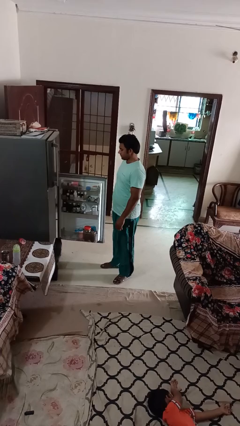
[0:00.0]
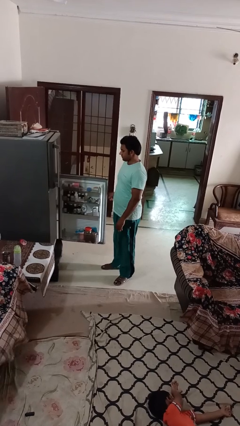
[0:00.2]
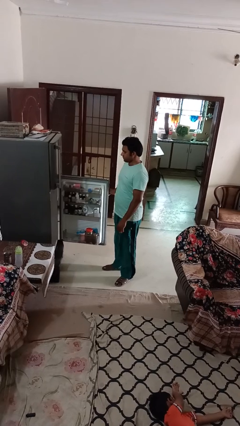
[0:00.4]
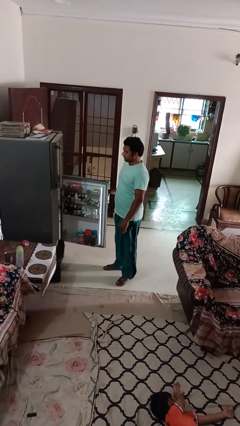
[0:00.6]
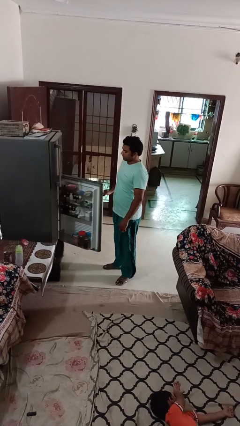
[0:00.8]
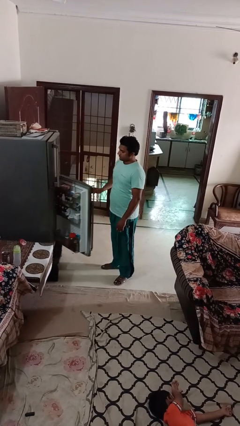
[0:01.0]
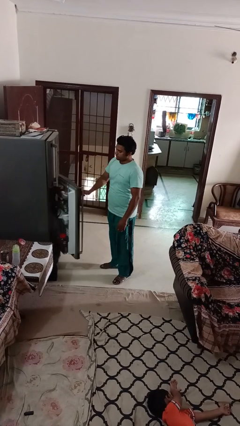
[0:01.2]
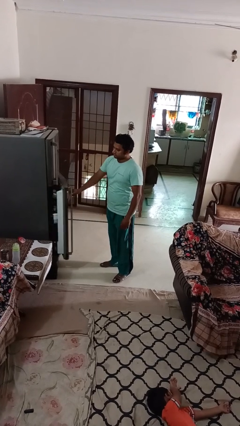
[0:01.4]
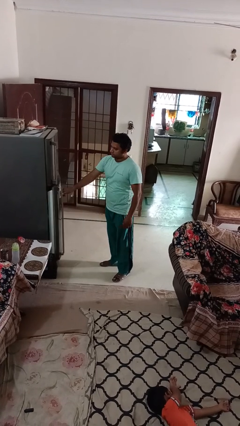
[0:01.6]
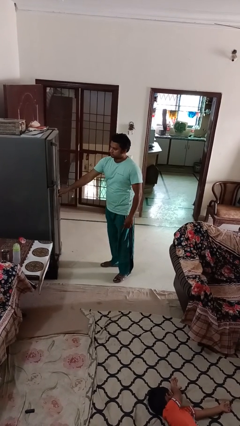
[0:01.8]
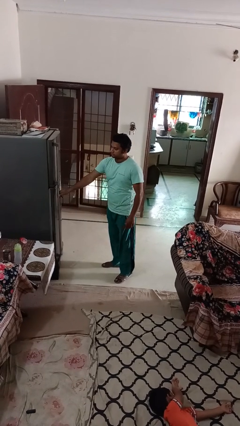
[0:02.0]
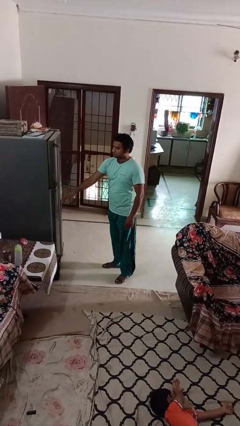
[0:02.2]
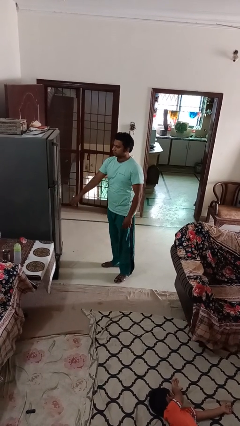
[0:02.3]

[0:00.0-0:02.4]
person closes refrigerator

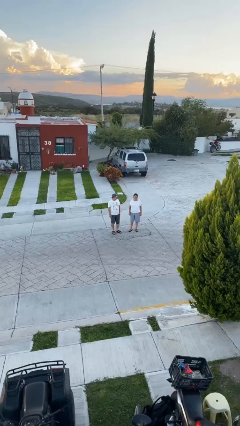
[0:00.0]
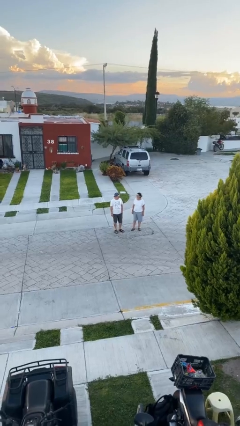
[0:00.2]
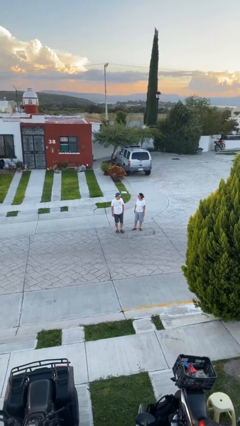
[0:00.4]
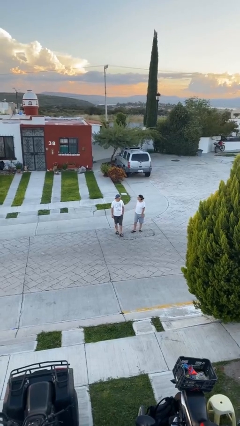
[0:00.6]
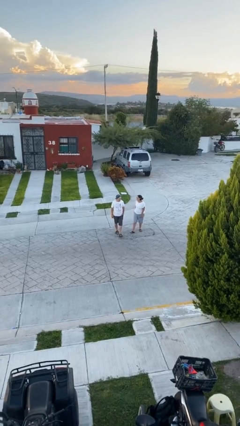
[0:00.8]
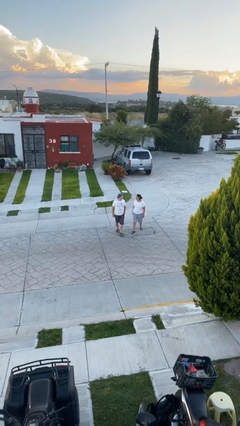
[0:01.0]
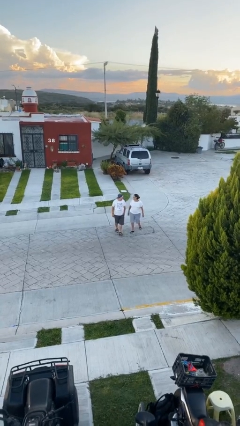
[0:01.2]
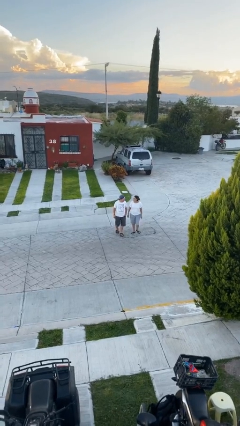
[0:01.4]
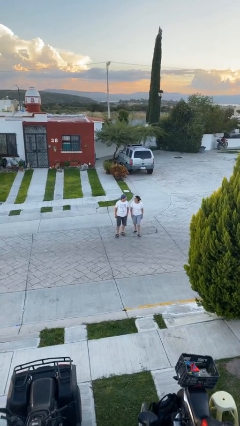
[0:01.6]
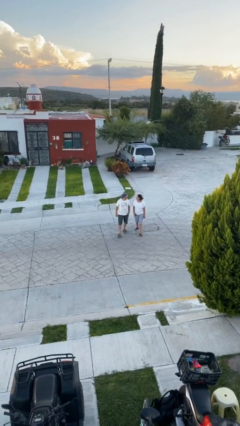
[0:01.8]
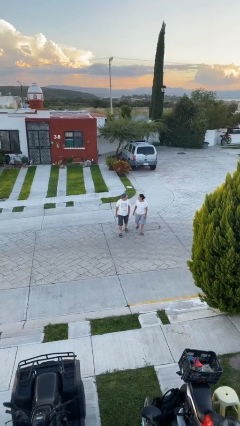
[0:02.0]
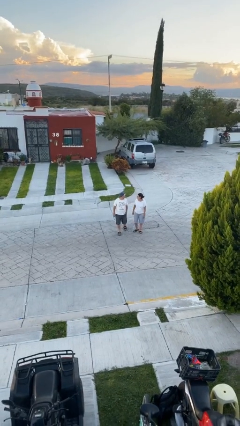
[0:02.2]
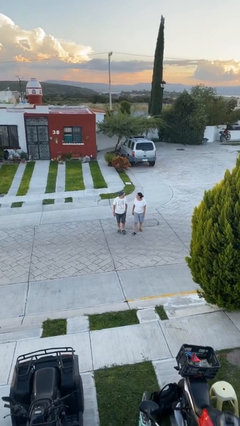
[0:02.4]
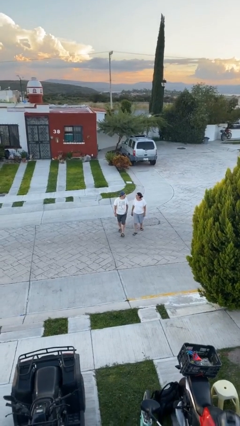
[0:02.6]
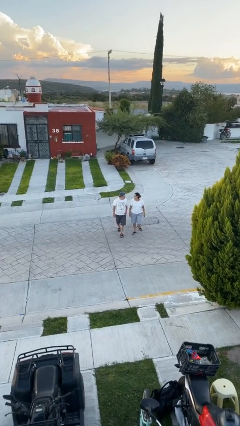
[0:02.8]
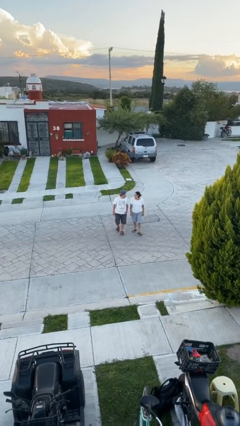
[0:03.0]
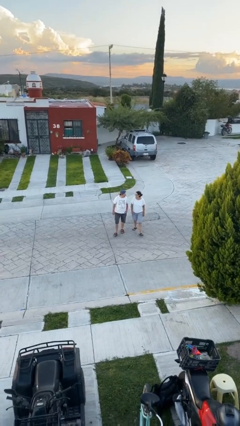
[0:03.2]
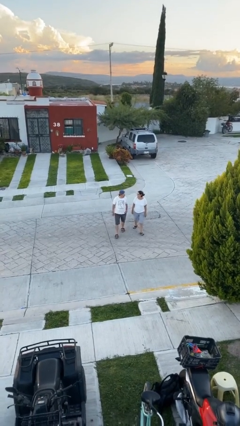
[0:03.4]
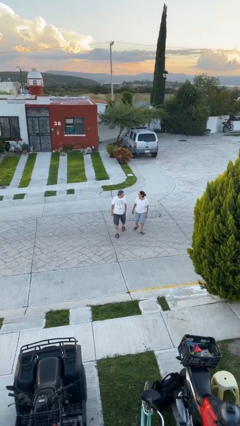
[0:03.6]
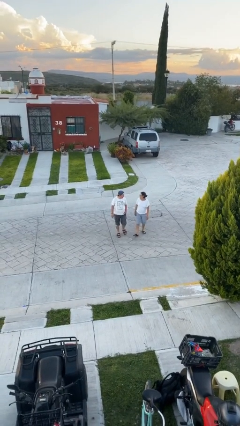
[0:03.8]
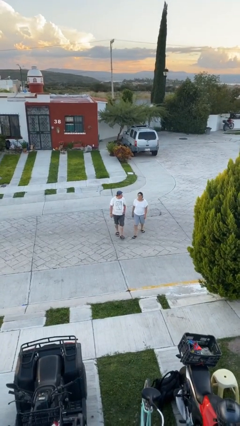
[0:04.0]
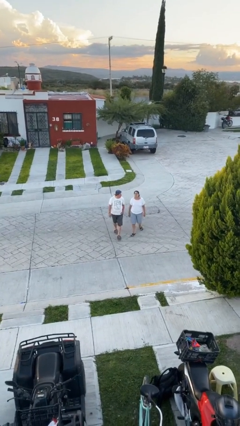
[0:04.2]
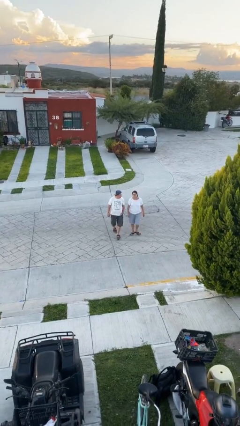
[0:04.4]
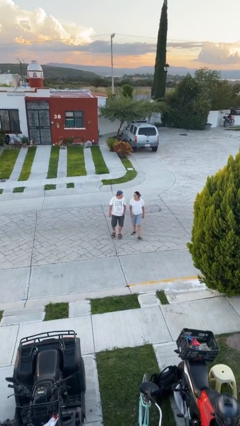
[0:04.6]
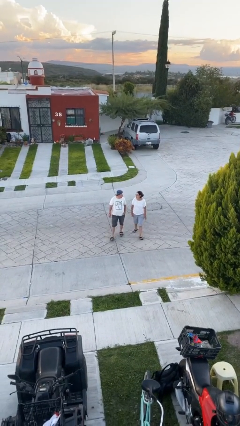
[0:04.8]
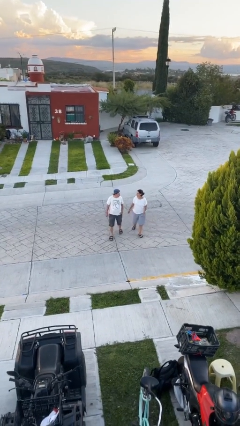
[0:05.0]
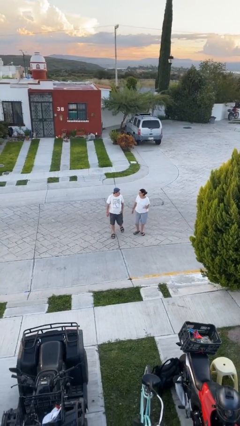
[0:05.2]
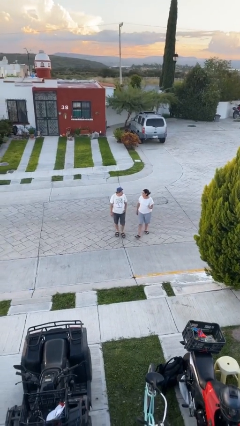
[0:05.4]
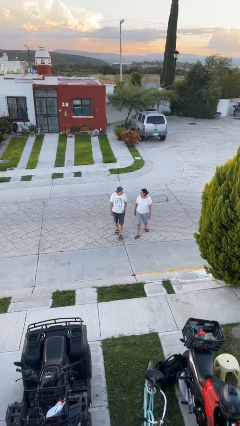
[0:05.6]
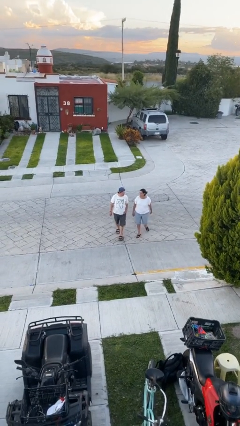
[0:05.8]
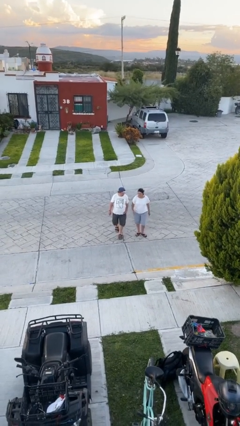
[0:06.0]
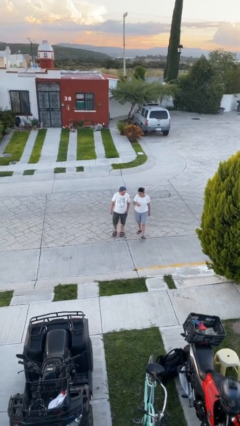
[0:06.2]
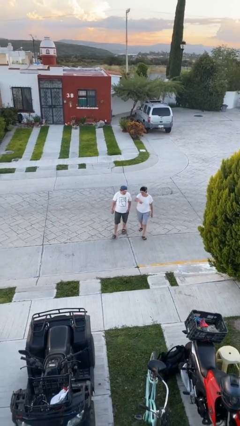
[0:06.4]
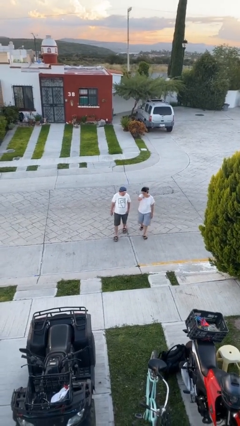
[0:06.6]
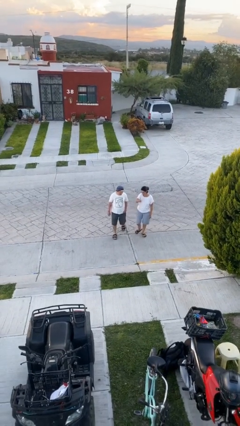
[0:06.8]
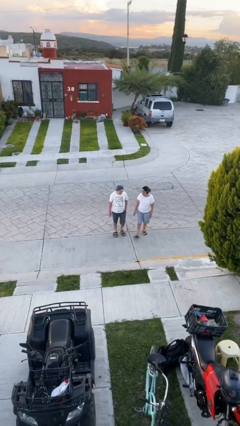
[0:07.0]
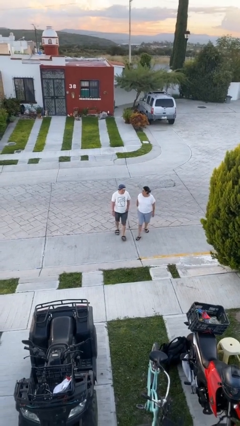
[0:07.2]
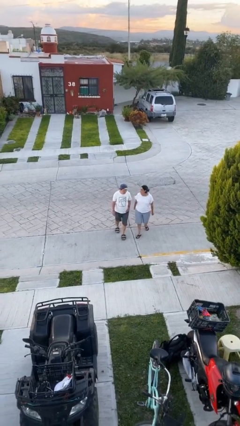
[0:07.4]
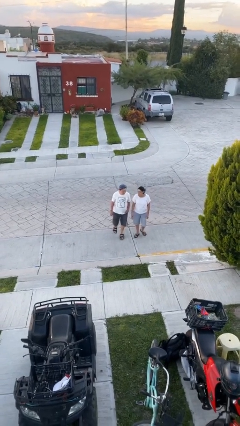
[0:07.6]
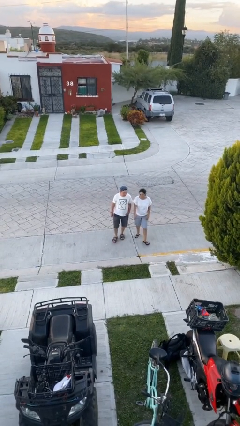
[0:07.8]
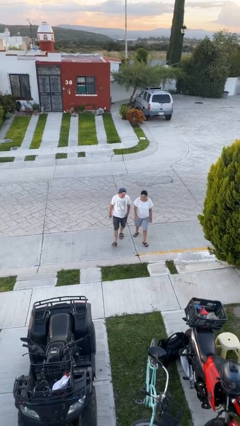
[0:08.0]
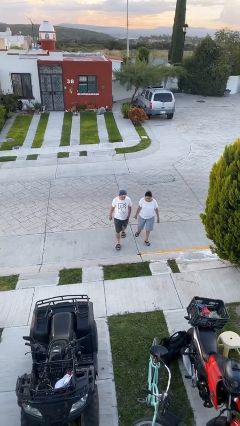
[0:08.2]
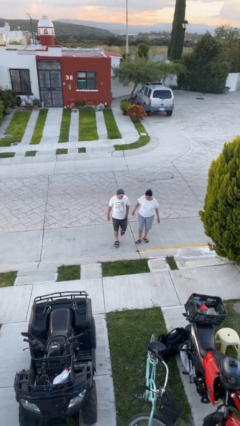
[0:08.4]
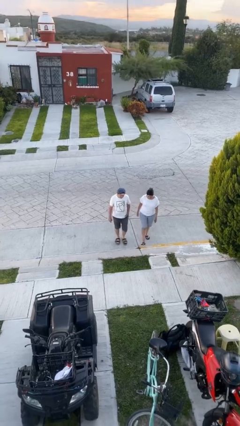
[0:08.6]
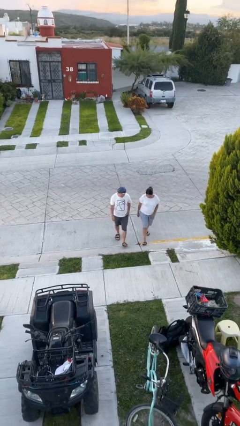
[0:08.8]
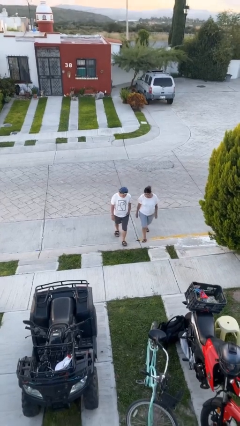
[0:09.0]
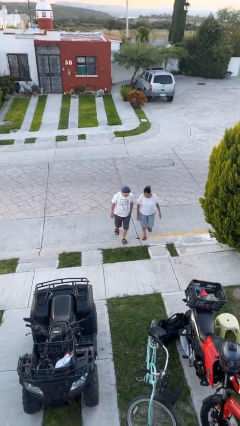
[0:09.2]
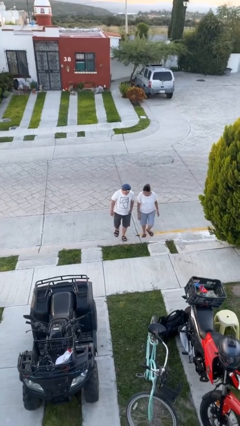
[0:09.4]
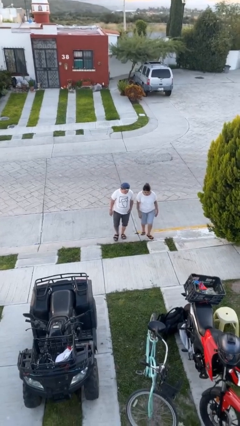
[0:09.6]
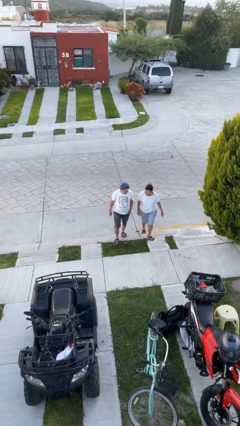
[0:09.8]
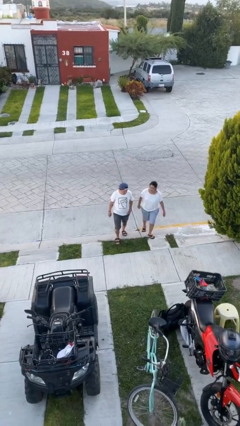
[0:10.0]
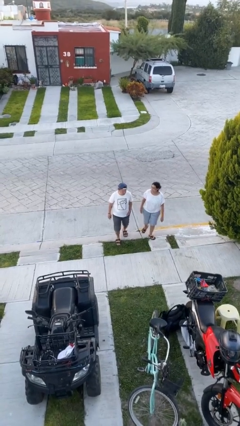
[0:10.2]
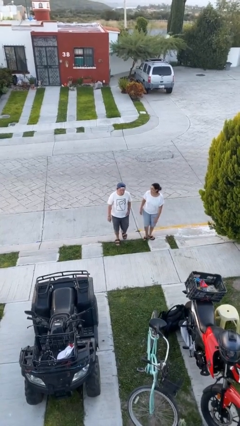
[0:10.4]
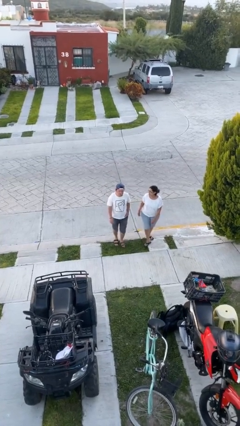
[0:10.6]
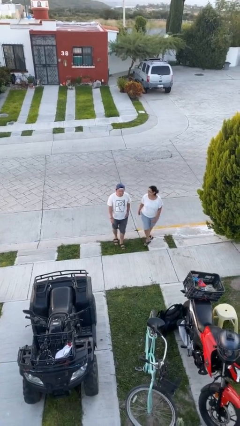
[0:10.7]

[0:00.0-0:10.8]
person talks to person

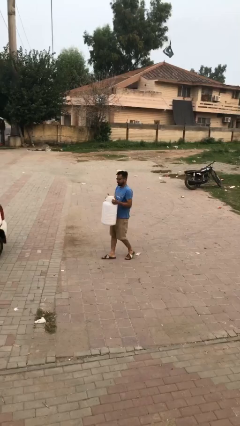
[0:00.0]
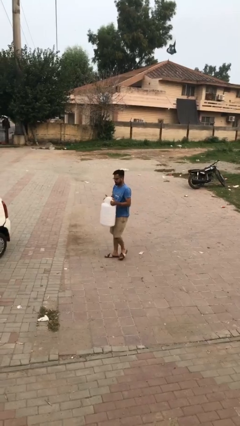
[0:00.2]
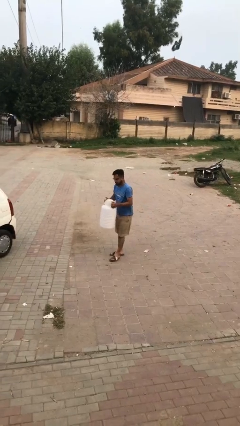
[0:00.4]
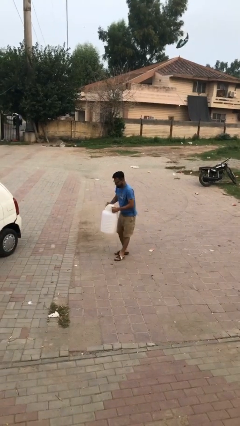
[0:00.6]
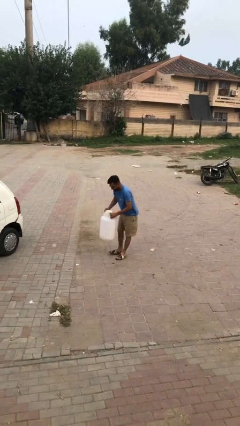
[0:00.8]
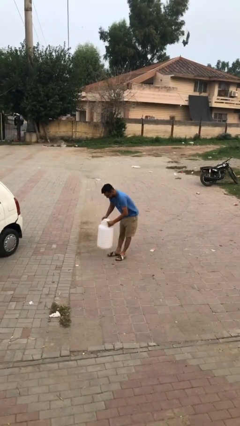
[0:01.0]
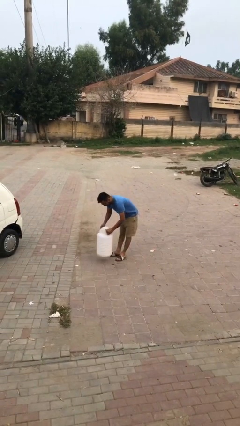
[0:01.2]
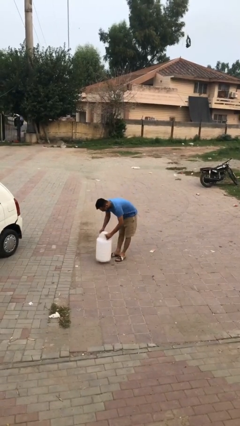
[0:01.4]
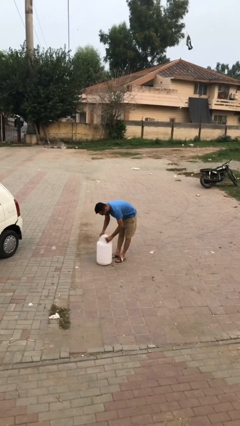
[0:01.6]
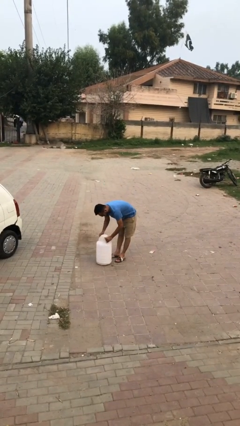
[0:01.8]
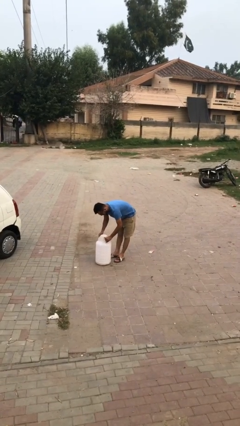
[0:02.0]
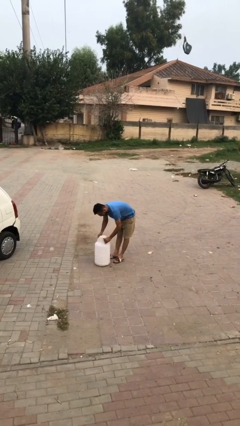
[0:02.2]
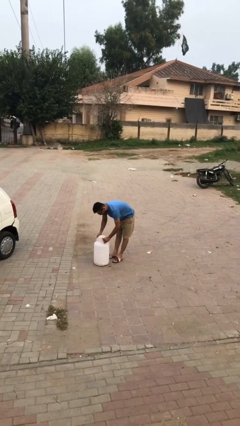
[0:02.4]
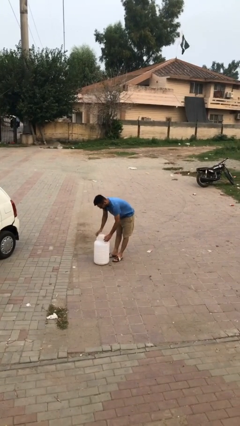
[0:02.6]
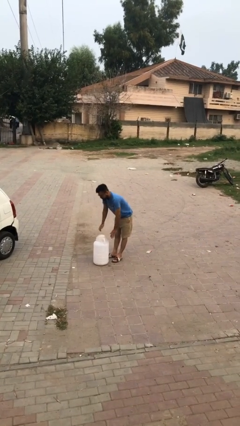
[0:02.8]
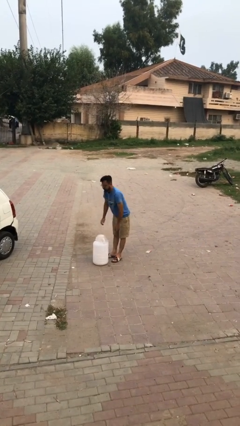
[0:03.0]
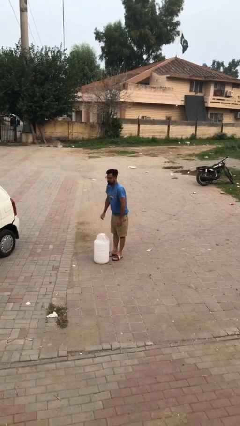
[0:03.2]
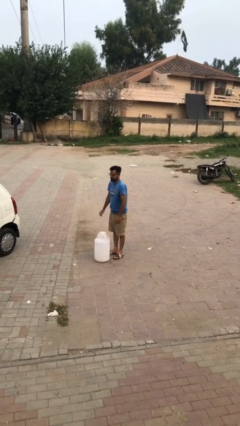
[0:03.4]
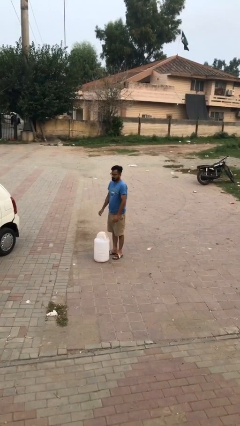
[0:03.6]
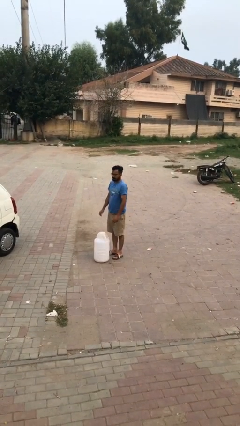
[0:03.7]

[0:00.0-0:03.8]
person puts down object on floor

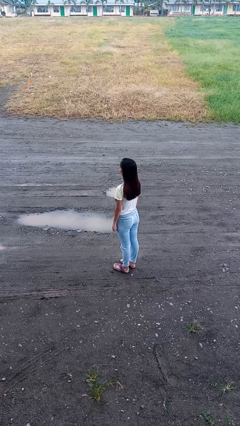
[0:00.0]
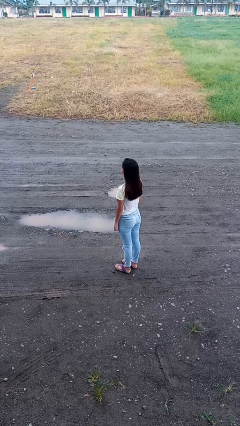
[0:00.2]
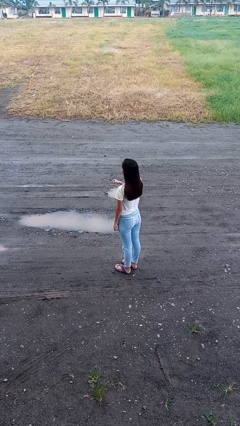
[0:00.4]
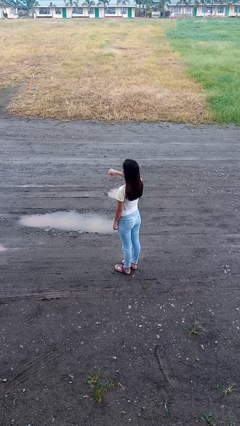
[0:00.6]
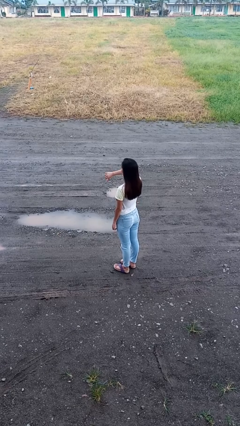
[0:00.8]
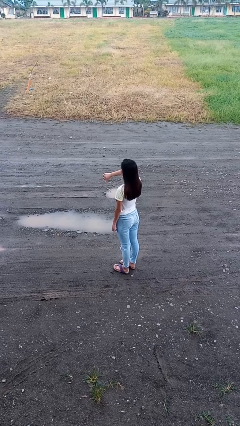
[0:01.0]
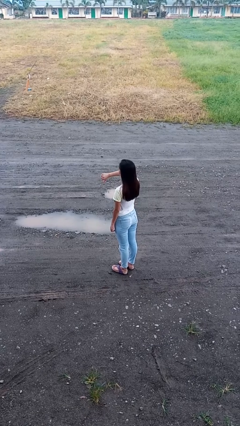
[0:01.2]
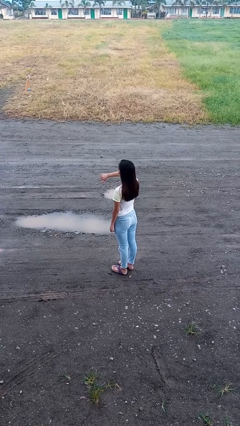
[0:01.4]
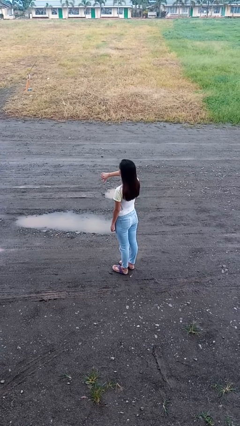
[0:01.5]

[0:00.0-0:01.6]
person gestures thumbs down
